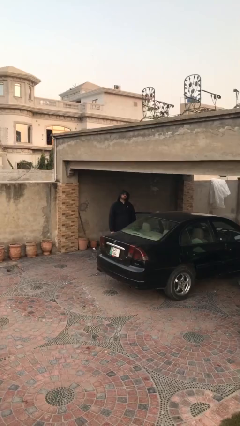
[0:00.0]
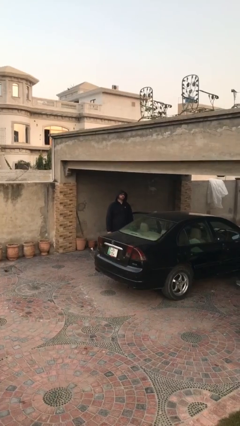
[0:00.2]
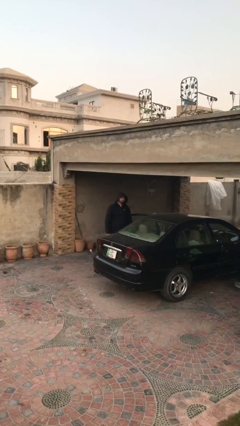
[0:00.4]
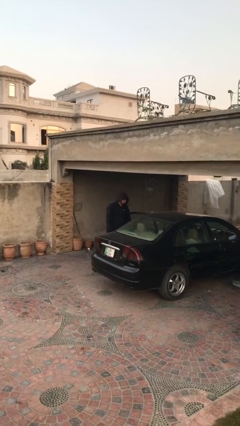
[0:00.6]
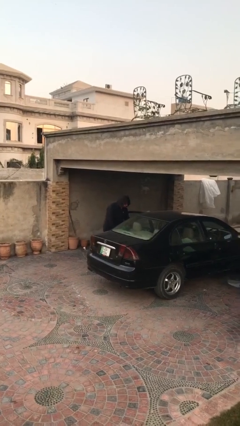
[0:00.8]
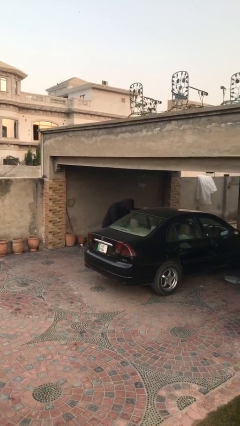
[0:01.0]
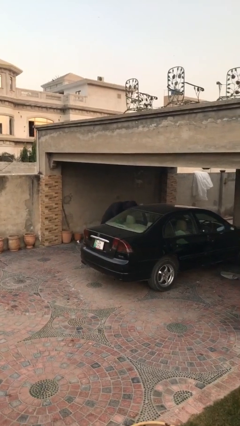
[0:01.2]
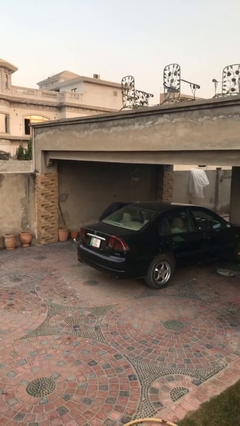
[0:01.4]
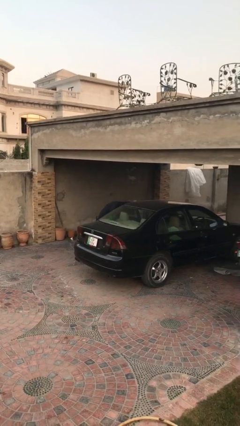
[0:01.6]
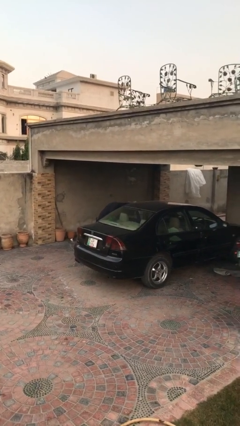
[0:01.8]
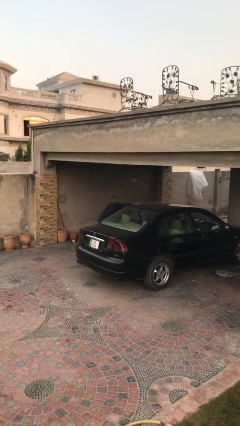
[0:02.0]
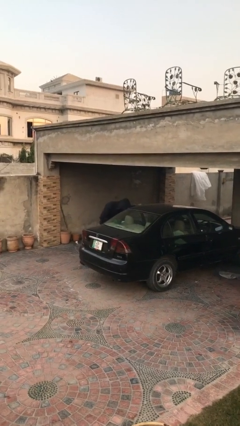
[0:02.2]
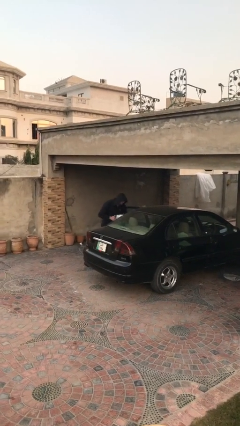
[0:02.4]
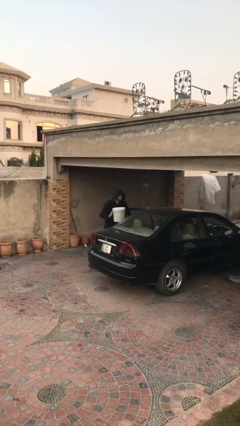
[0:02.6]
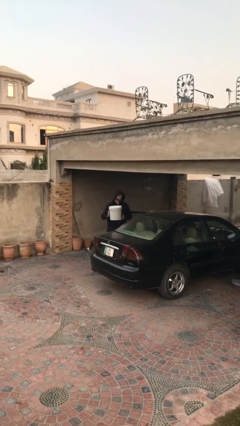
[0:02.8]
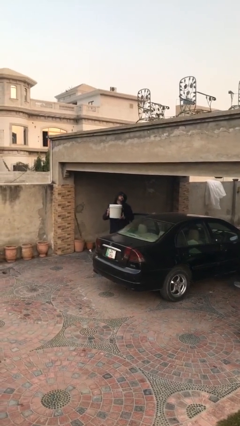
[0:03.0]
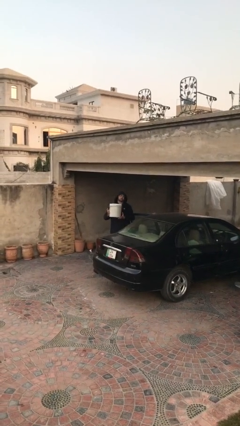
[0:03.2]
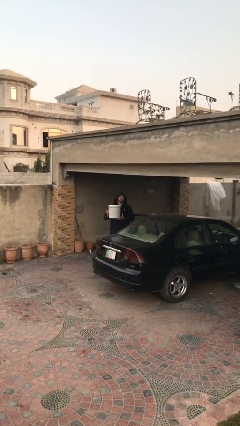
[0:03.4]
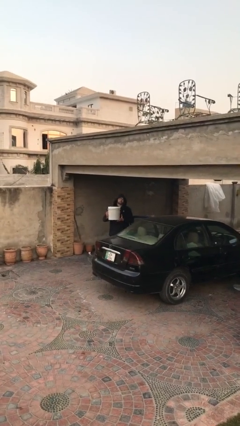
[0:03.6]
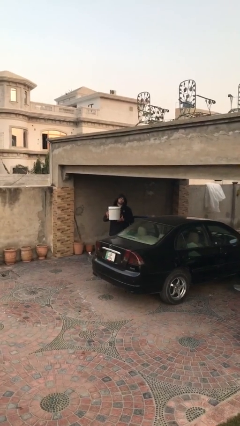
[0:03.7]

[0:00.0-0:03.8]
person unloads car

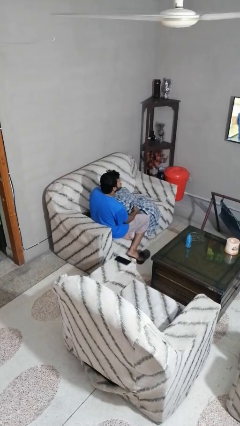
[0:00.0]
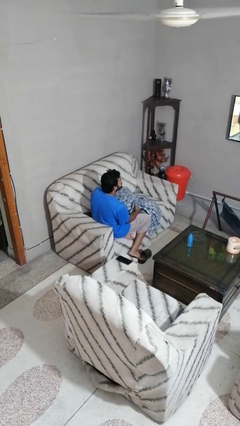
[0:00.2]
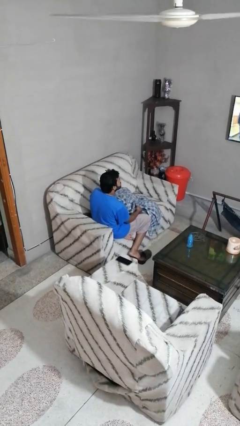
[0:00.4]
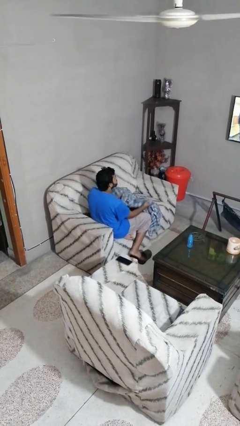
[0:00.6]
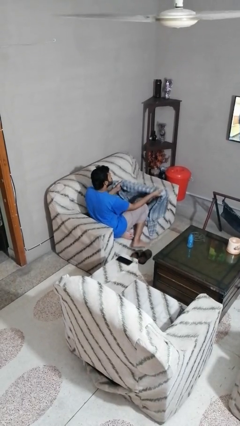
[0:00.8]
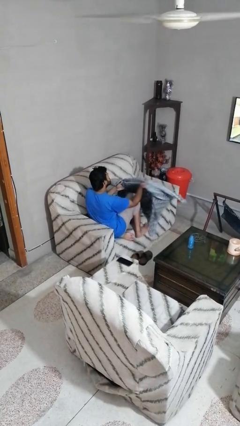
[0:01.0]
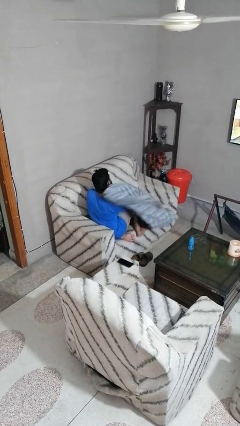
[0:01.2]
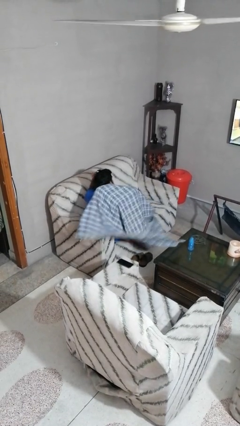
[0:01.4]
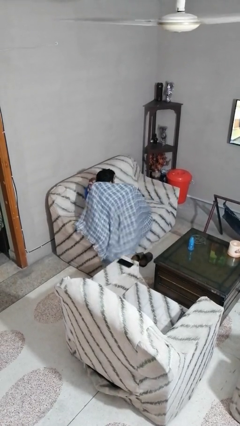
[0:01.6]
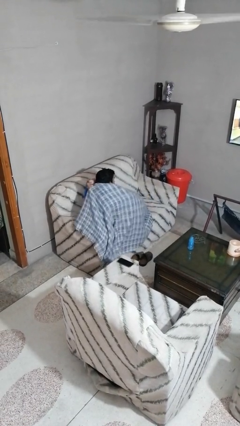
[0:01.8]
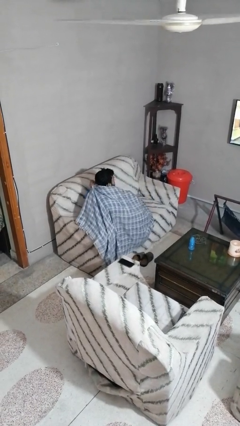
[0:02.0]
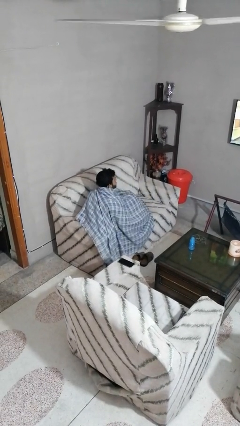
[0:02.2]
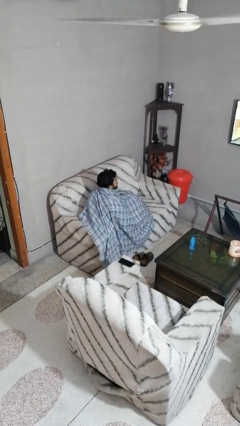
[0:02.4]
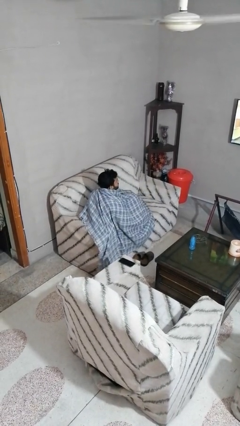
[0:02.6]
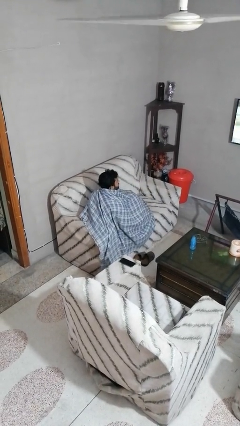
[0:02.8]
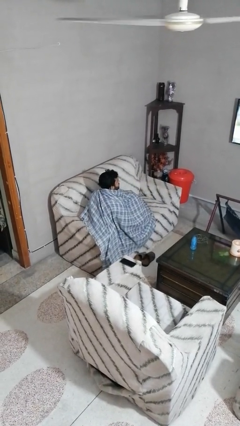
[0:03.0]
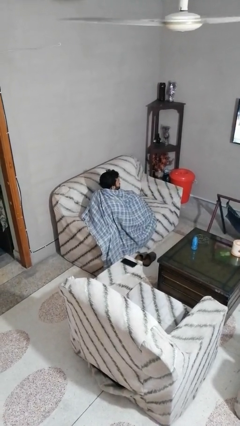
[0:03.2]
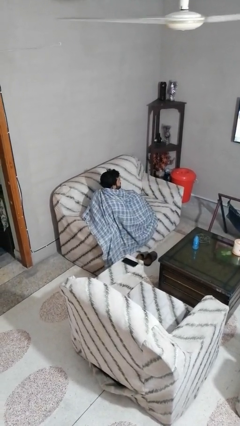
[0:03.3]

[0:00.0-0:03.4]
person covers with blanket

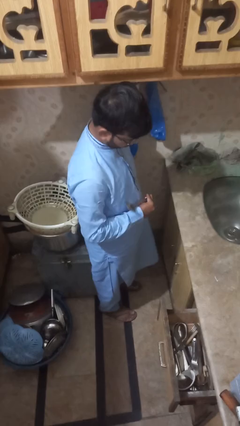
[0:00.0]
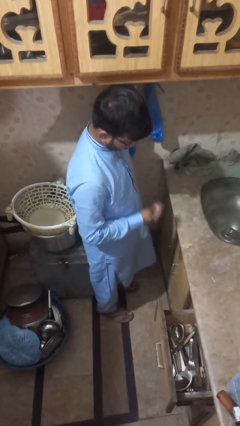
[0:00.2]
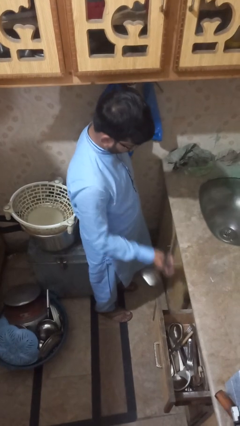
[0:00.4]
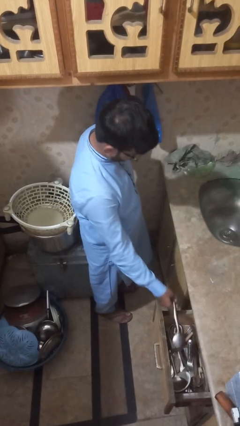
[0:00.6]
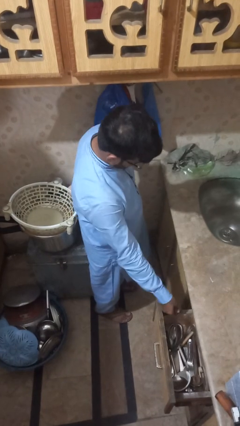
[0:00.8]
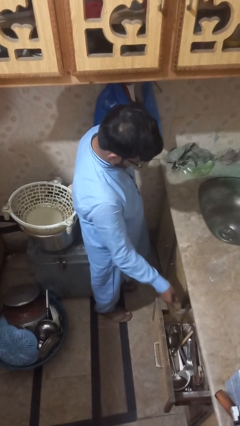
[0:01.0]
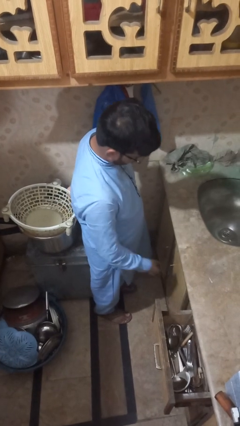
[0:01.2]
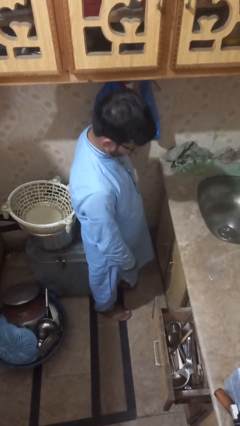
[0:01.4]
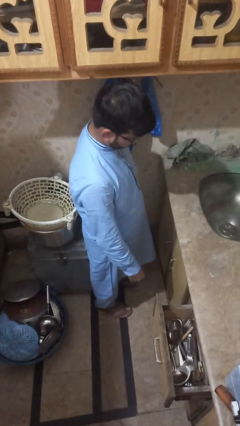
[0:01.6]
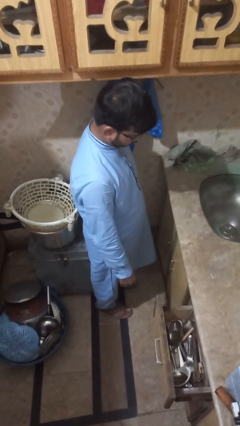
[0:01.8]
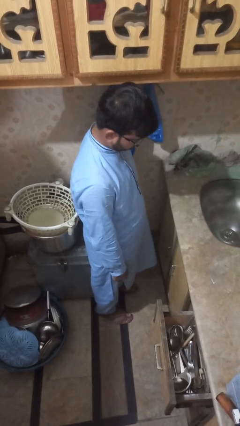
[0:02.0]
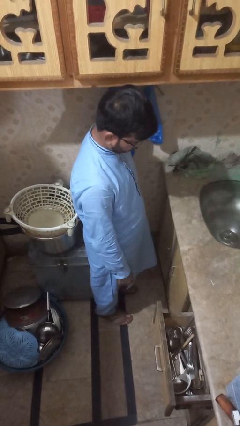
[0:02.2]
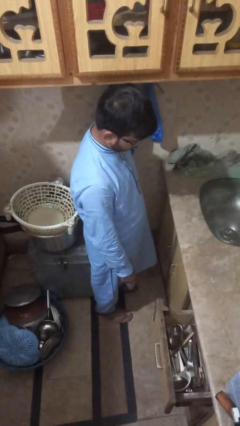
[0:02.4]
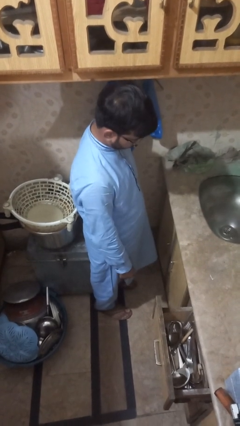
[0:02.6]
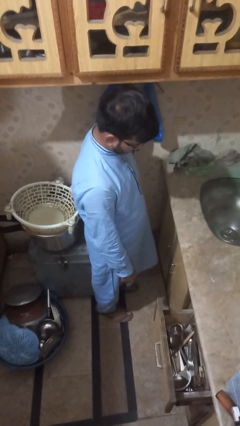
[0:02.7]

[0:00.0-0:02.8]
person puts object into kitchen drawer

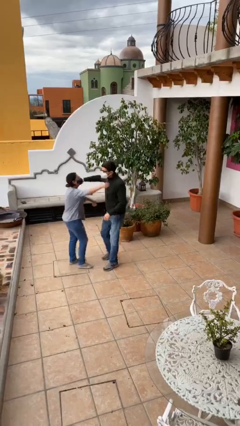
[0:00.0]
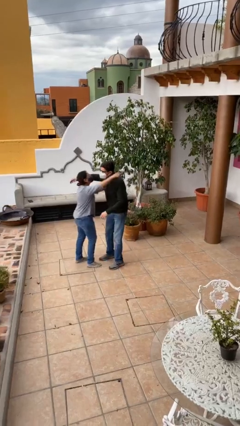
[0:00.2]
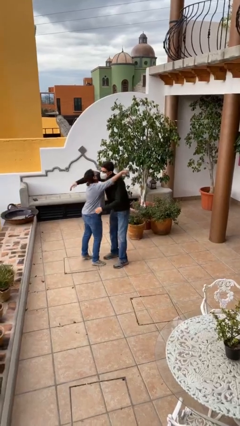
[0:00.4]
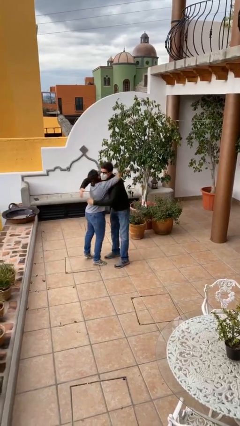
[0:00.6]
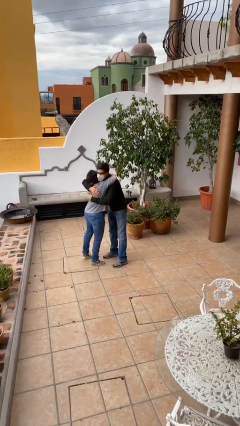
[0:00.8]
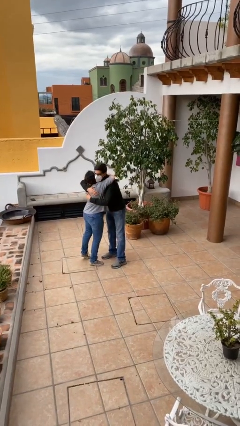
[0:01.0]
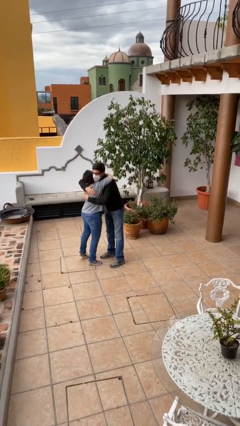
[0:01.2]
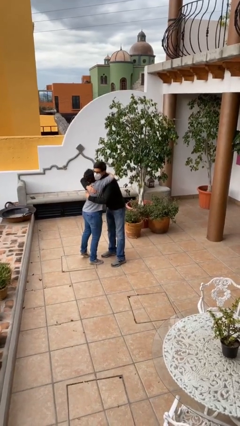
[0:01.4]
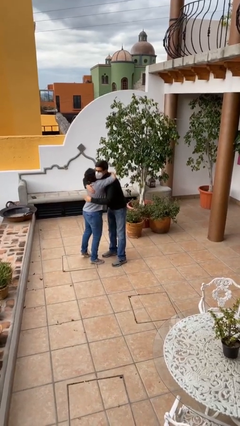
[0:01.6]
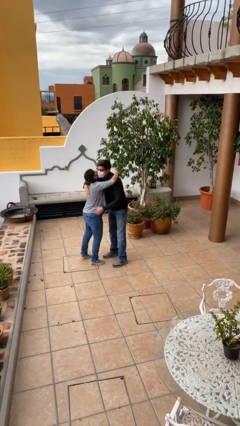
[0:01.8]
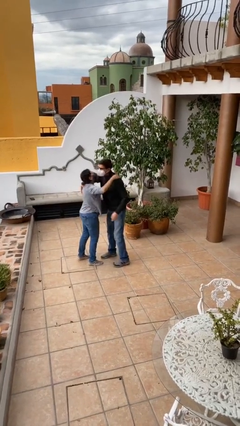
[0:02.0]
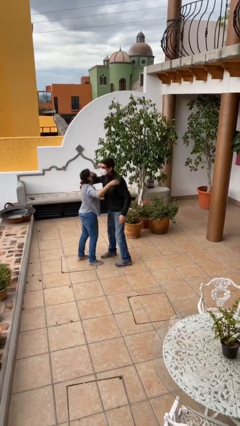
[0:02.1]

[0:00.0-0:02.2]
person embraces person

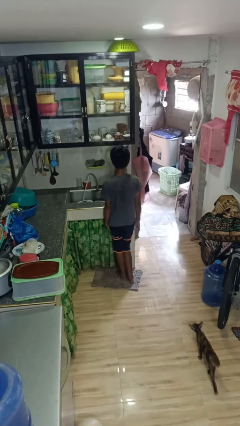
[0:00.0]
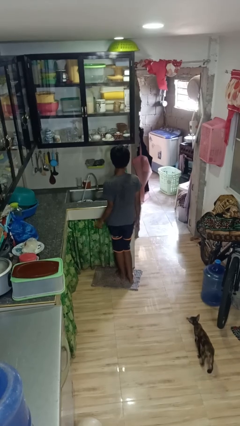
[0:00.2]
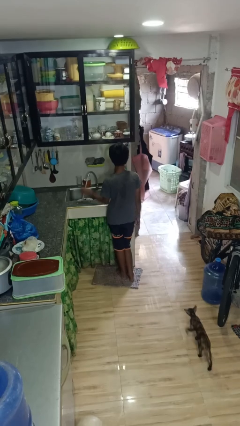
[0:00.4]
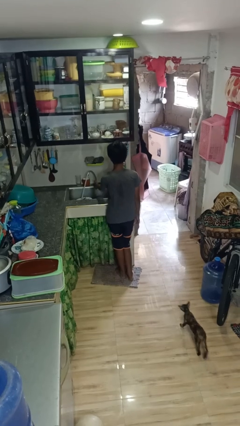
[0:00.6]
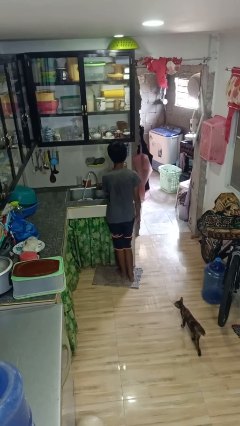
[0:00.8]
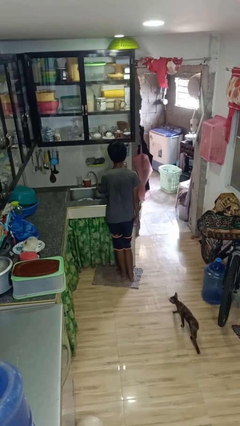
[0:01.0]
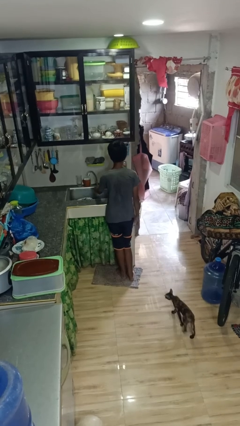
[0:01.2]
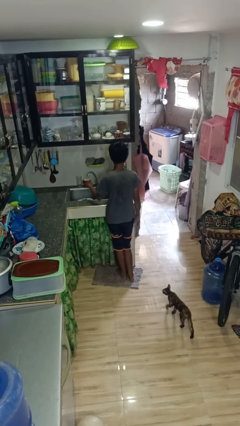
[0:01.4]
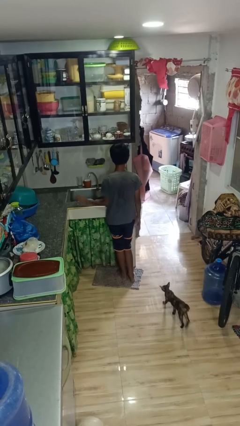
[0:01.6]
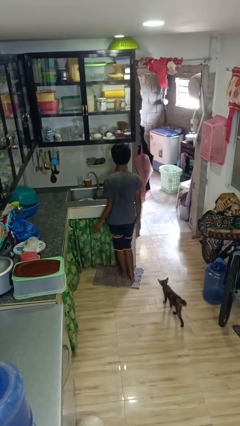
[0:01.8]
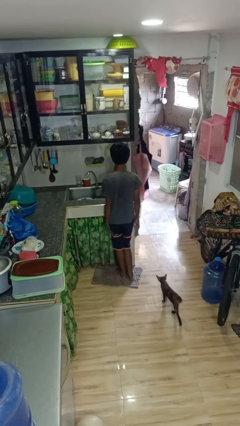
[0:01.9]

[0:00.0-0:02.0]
person turns off faucet

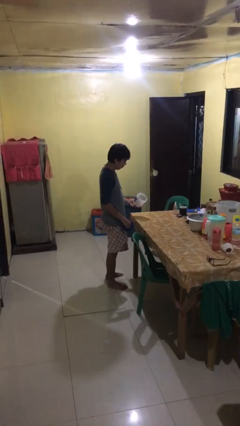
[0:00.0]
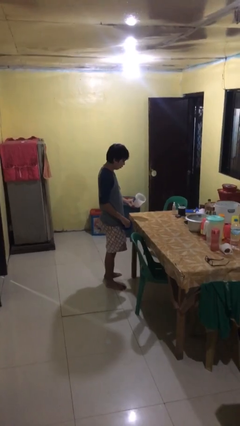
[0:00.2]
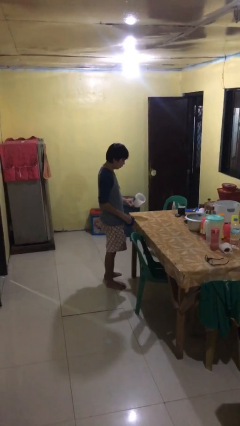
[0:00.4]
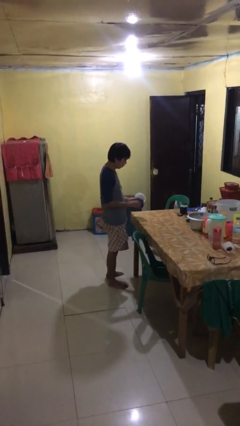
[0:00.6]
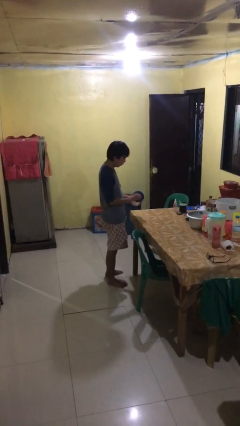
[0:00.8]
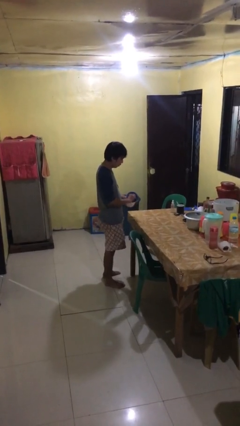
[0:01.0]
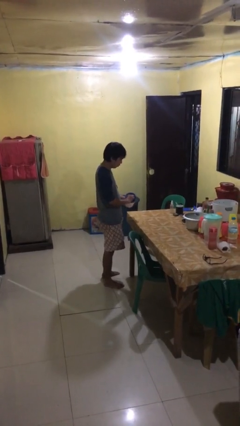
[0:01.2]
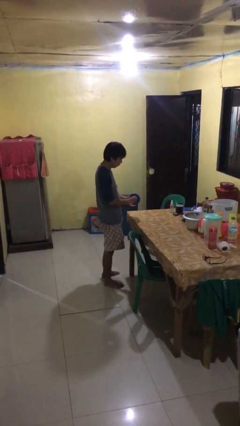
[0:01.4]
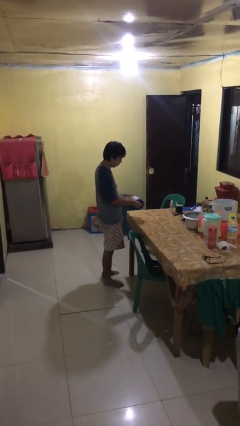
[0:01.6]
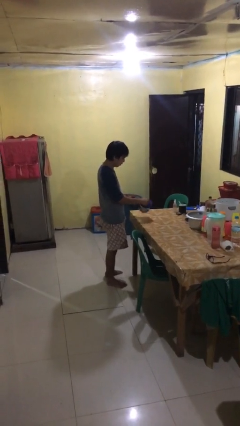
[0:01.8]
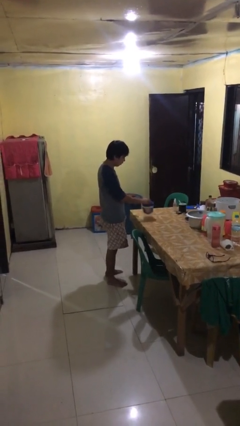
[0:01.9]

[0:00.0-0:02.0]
person closes jar

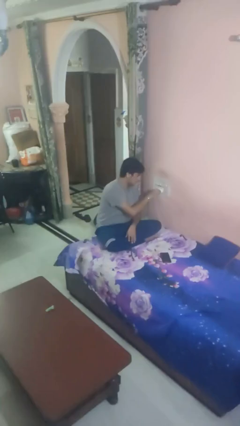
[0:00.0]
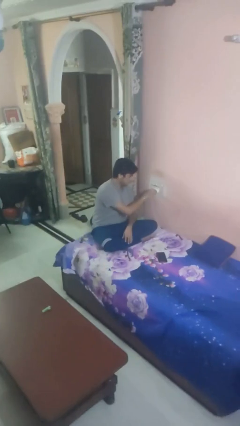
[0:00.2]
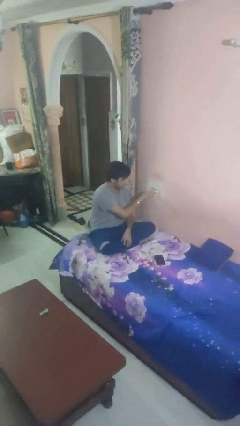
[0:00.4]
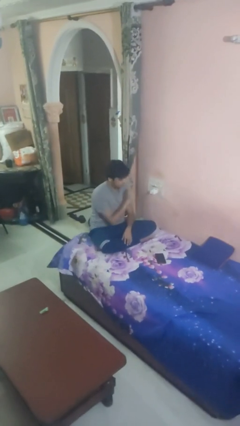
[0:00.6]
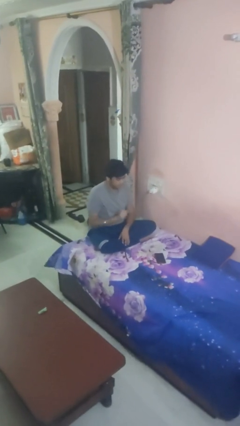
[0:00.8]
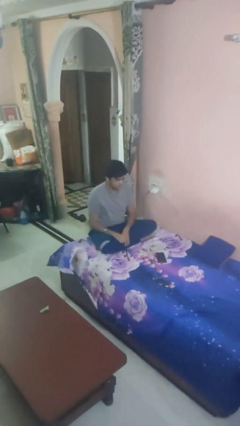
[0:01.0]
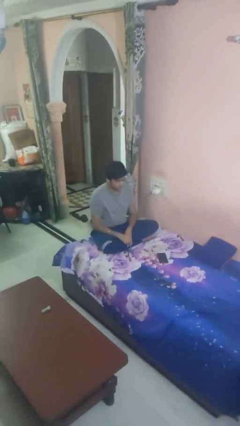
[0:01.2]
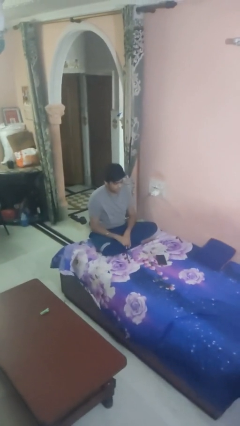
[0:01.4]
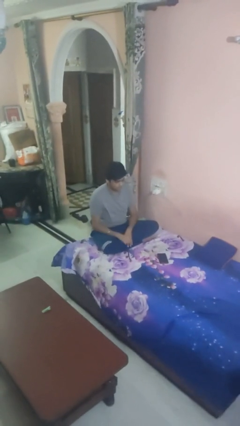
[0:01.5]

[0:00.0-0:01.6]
person plugs into electrical socket
